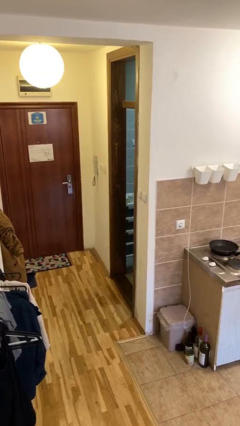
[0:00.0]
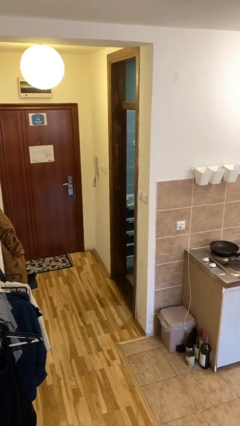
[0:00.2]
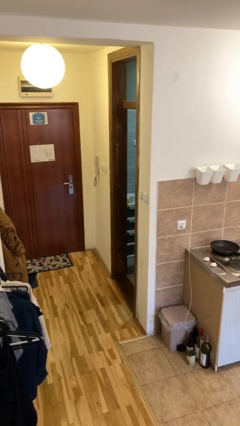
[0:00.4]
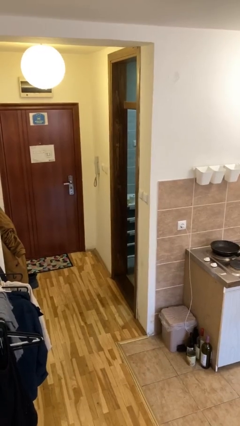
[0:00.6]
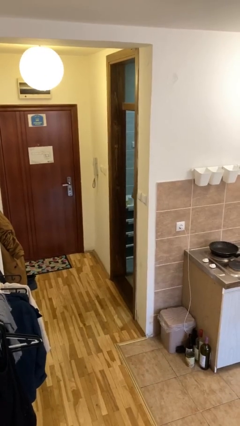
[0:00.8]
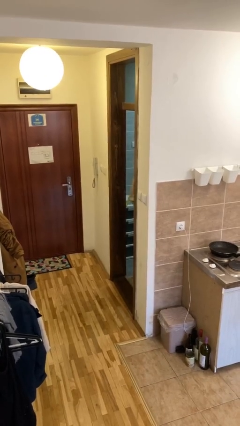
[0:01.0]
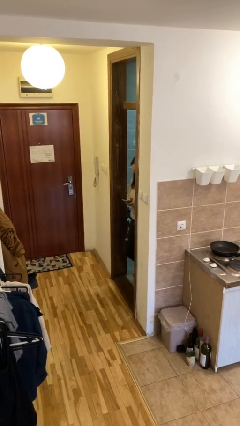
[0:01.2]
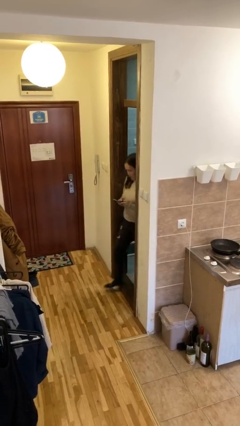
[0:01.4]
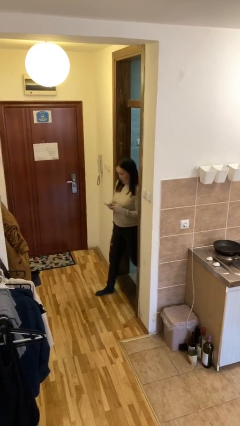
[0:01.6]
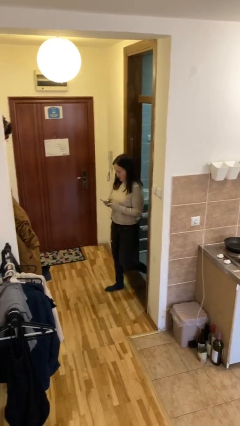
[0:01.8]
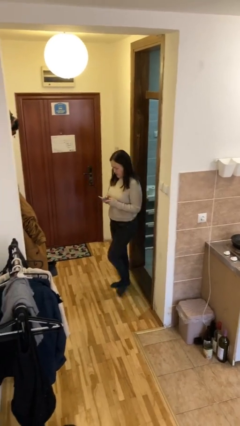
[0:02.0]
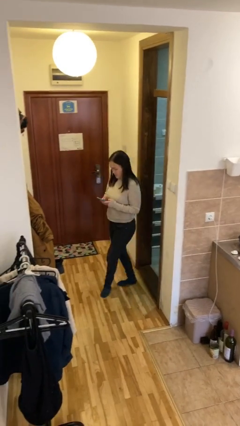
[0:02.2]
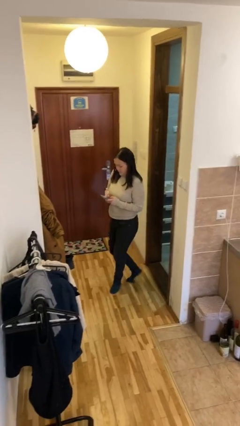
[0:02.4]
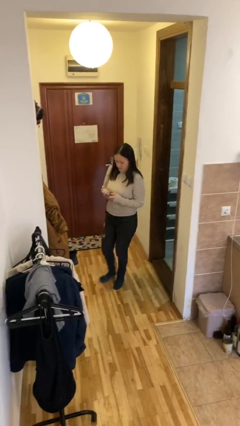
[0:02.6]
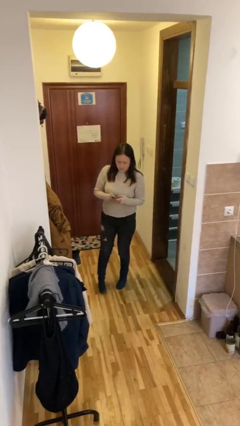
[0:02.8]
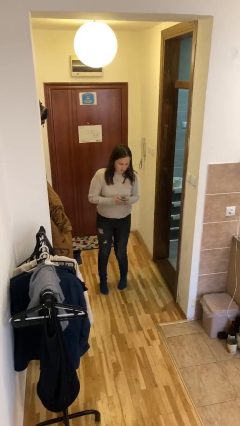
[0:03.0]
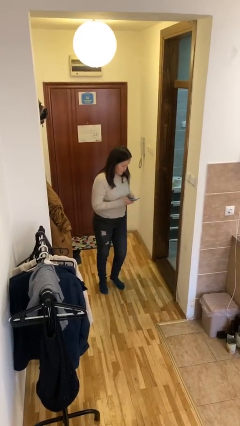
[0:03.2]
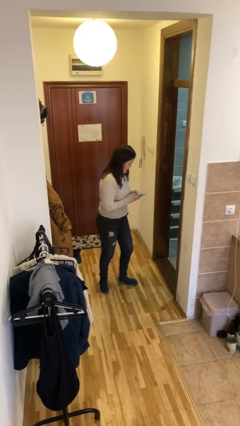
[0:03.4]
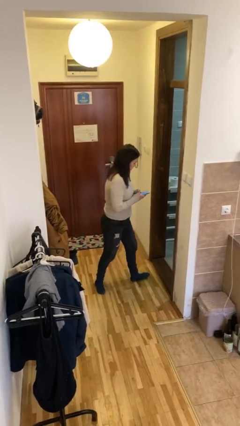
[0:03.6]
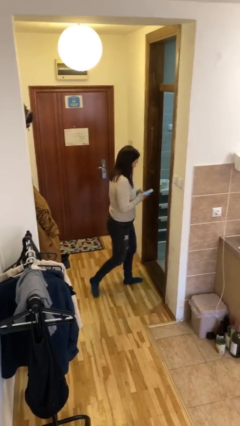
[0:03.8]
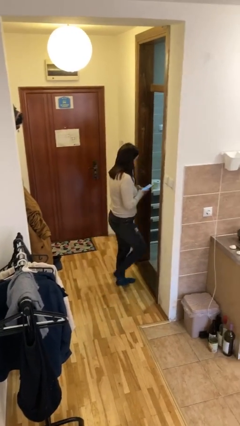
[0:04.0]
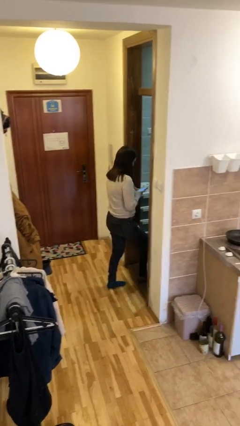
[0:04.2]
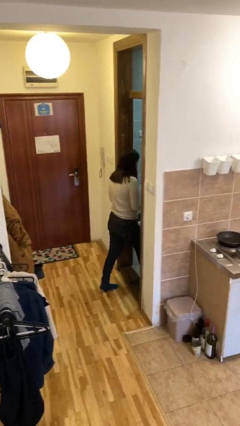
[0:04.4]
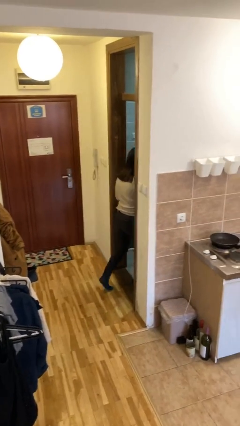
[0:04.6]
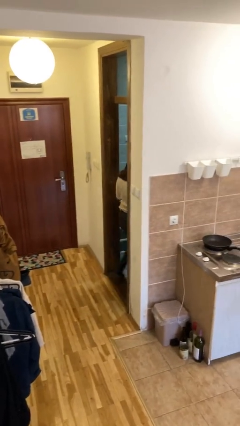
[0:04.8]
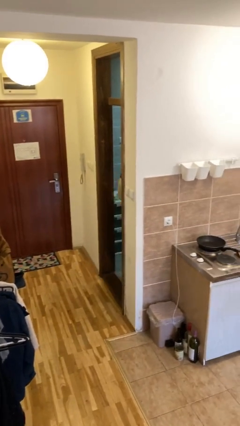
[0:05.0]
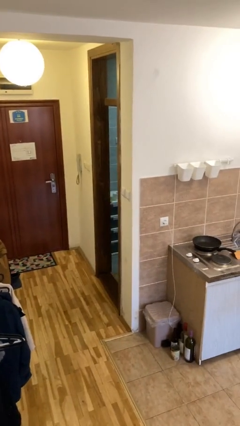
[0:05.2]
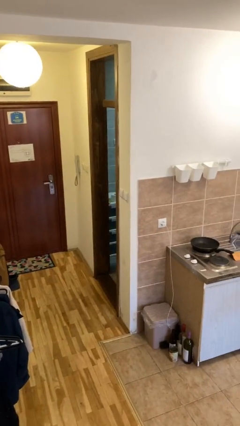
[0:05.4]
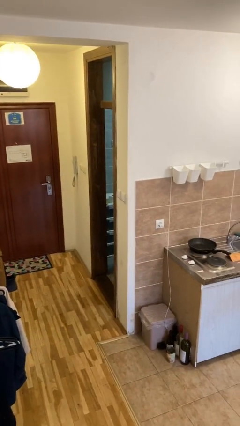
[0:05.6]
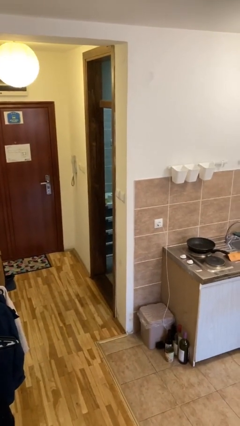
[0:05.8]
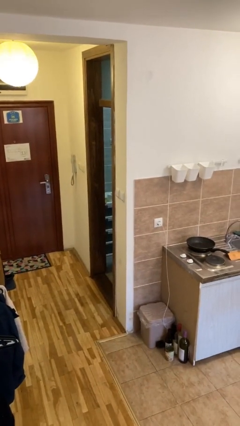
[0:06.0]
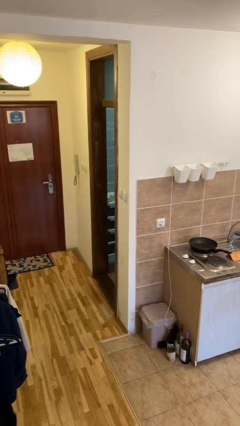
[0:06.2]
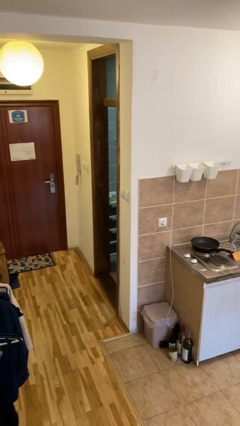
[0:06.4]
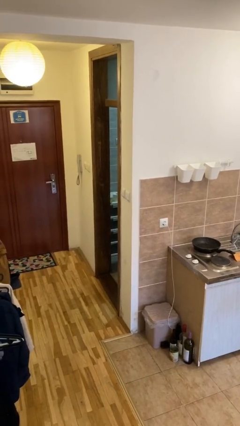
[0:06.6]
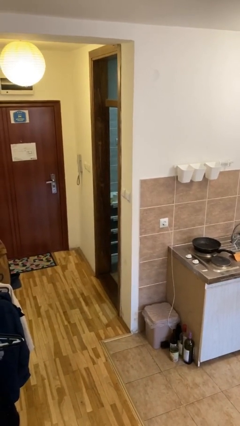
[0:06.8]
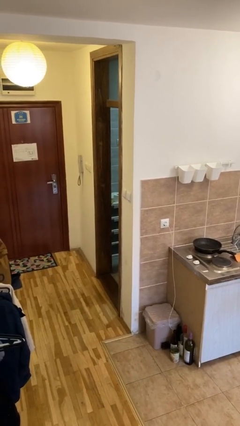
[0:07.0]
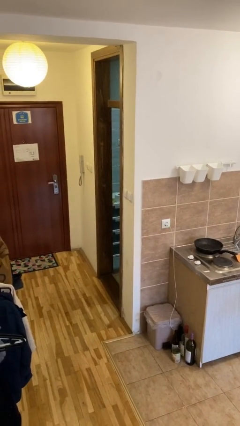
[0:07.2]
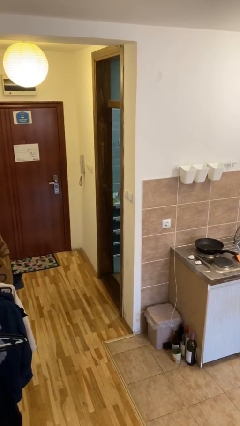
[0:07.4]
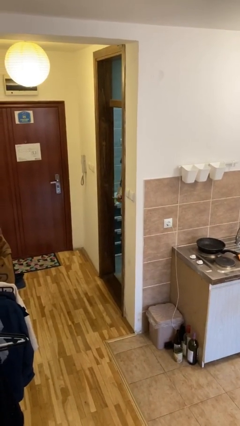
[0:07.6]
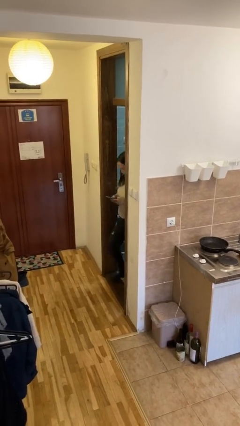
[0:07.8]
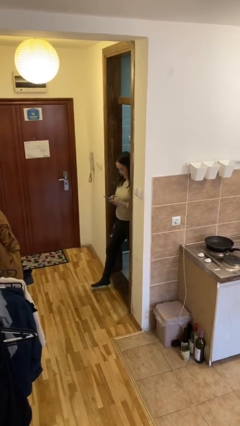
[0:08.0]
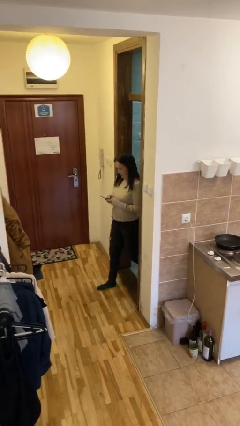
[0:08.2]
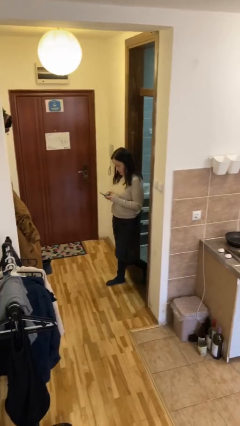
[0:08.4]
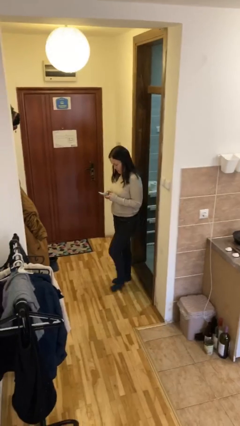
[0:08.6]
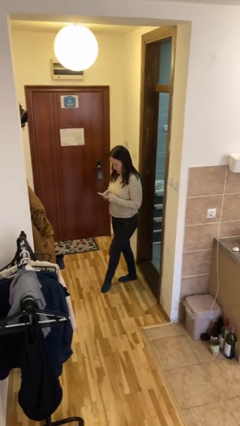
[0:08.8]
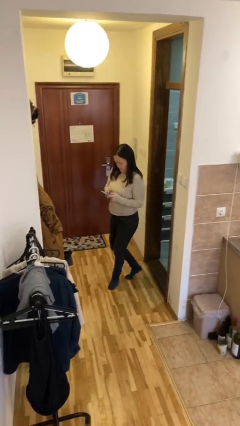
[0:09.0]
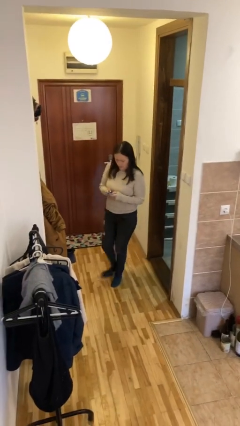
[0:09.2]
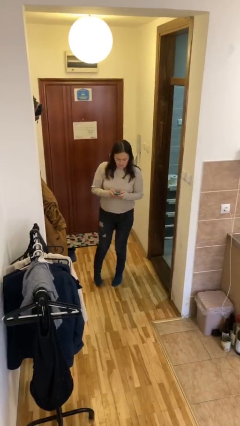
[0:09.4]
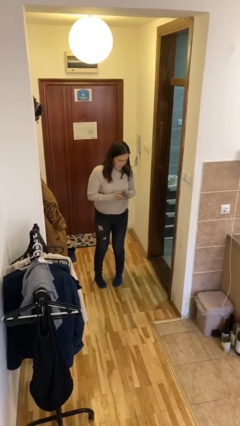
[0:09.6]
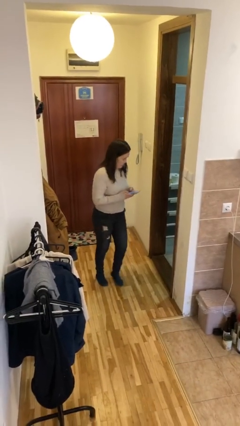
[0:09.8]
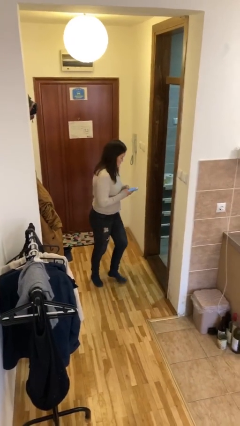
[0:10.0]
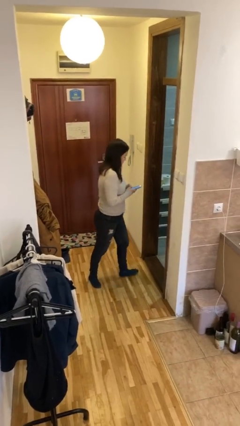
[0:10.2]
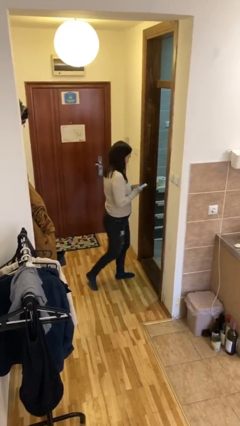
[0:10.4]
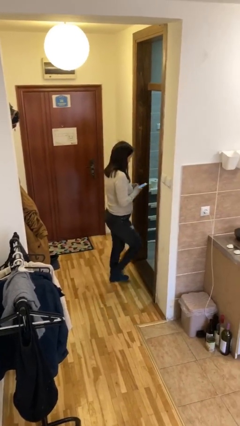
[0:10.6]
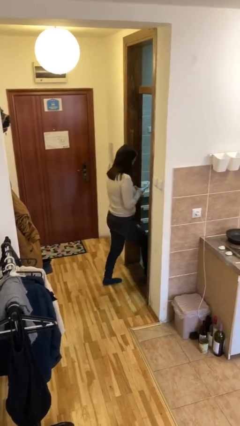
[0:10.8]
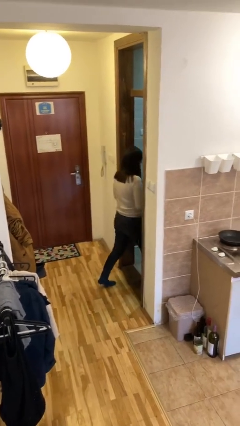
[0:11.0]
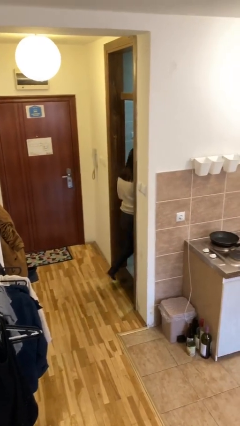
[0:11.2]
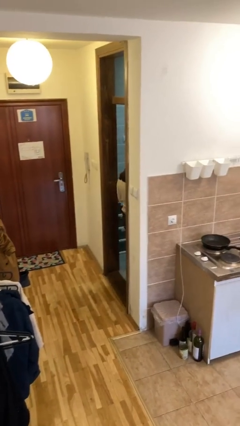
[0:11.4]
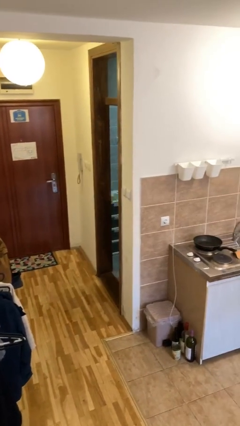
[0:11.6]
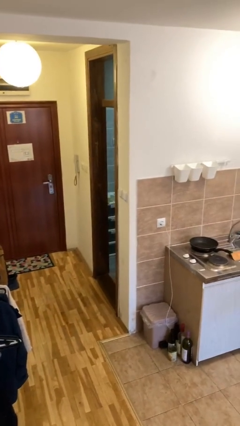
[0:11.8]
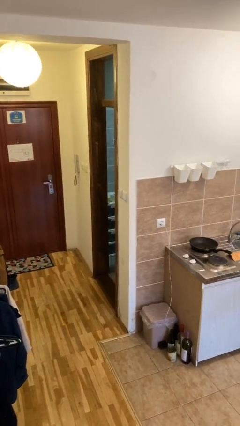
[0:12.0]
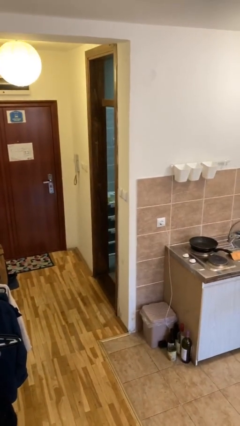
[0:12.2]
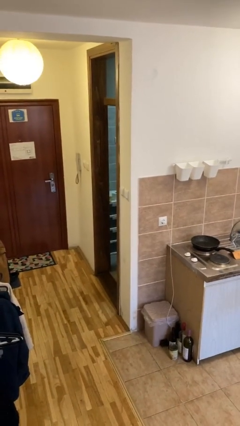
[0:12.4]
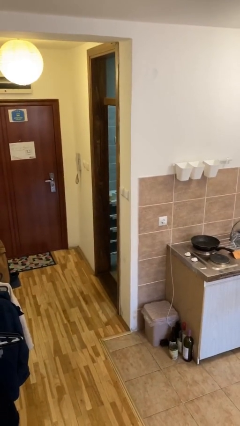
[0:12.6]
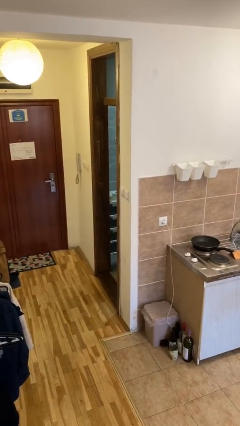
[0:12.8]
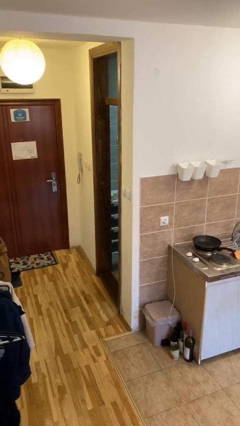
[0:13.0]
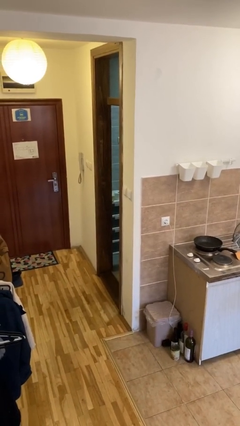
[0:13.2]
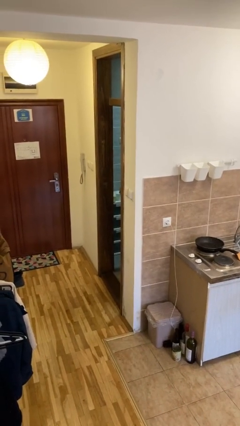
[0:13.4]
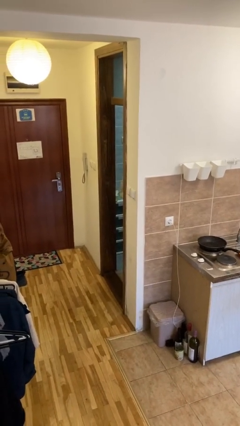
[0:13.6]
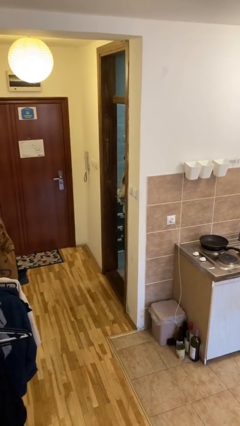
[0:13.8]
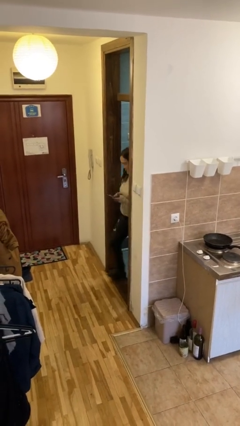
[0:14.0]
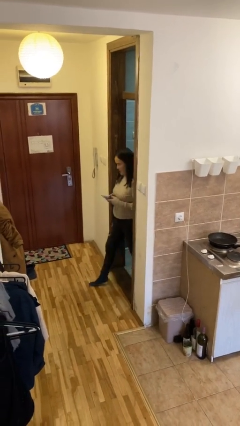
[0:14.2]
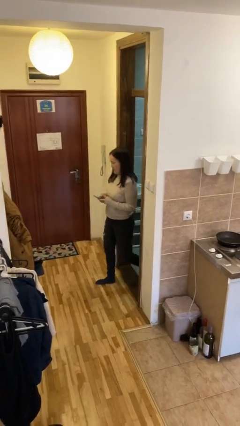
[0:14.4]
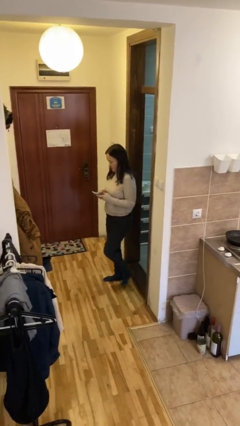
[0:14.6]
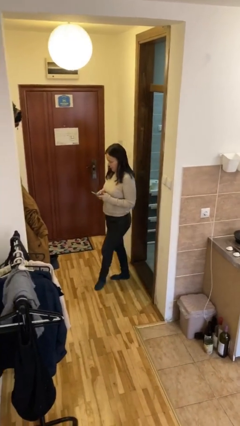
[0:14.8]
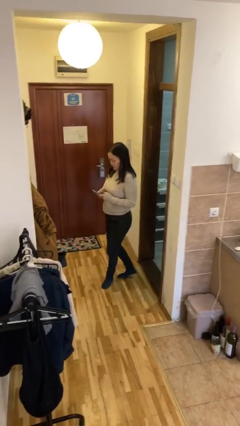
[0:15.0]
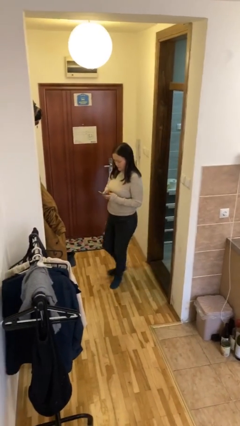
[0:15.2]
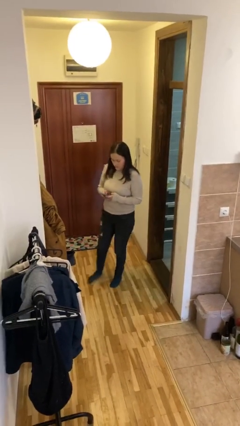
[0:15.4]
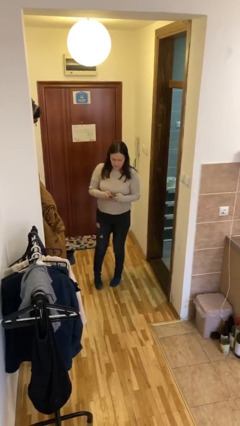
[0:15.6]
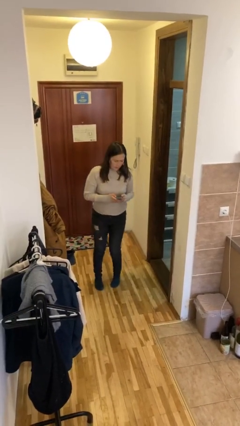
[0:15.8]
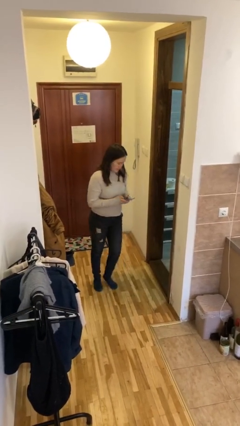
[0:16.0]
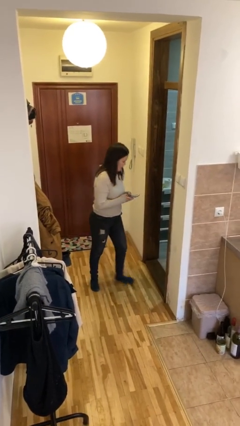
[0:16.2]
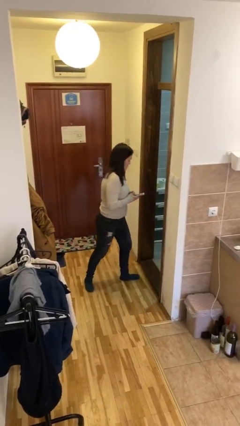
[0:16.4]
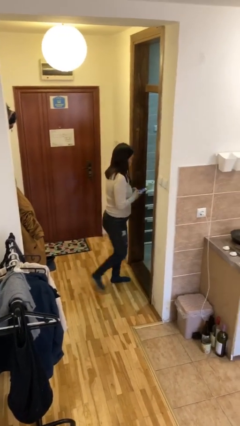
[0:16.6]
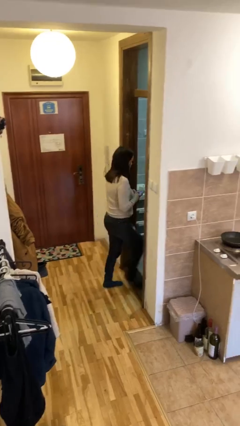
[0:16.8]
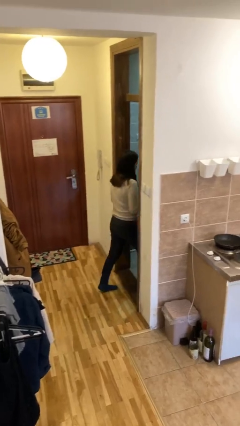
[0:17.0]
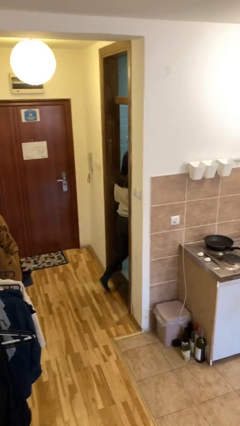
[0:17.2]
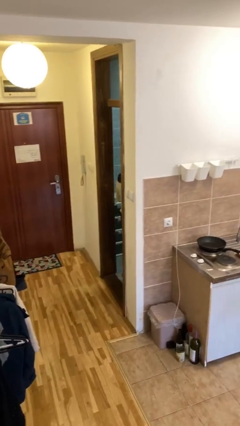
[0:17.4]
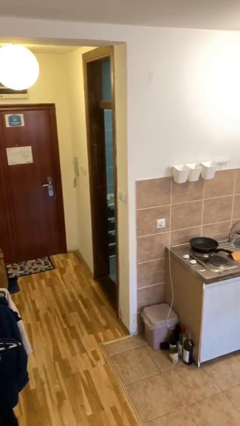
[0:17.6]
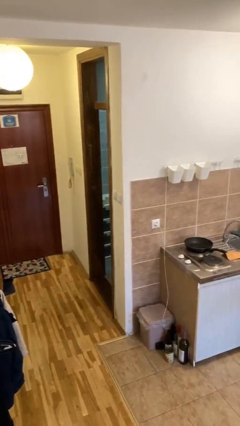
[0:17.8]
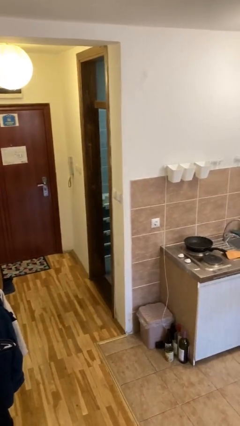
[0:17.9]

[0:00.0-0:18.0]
person texts on phone

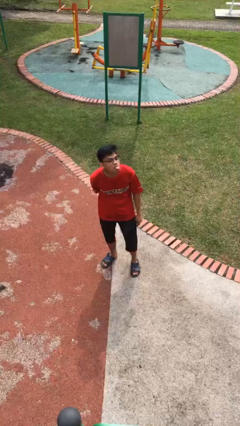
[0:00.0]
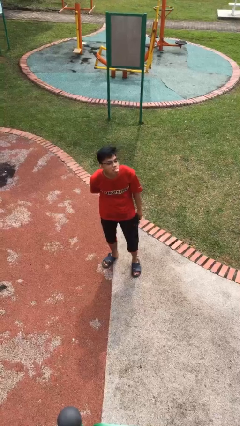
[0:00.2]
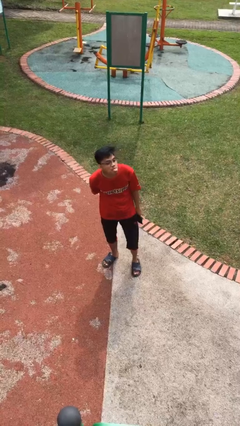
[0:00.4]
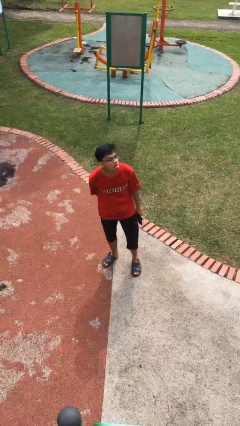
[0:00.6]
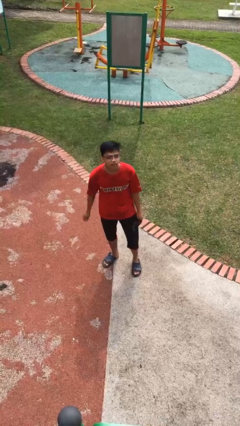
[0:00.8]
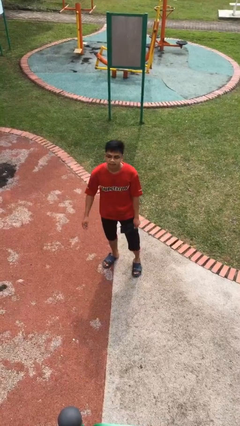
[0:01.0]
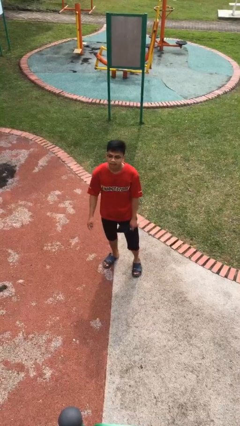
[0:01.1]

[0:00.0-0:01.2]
person sticks out tongue
